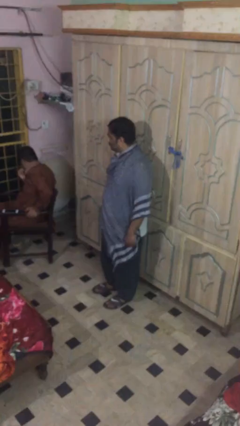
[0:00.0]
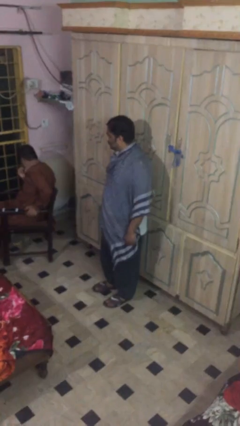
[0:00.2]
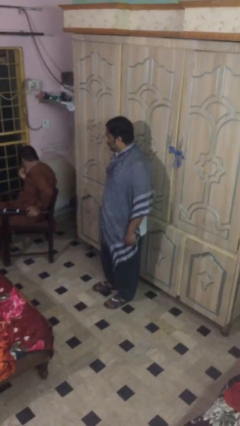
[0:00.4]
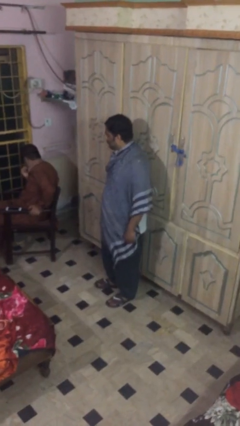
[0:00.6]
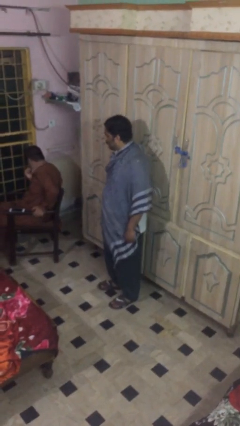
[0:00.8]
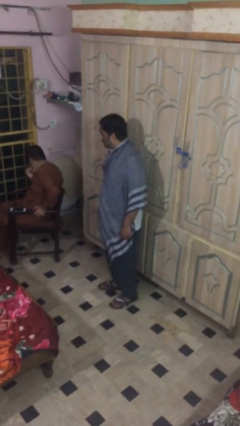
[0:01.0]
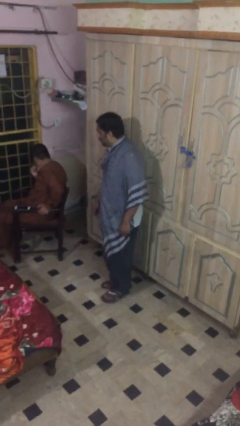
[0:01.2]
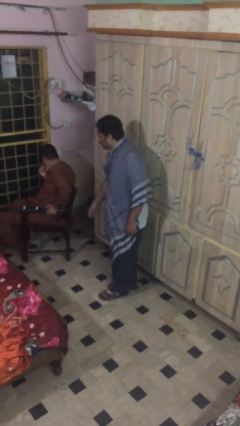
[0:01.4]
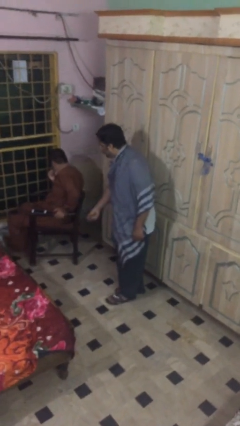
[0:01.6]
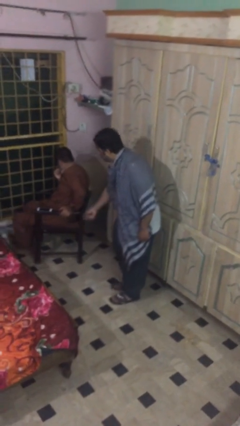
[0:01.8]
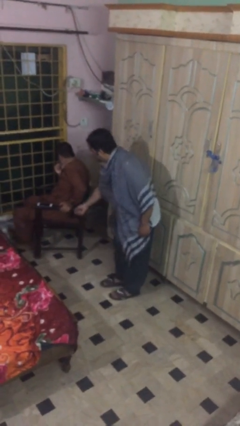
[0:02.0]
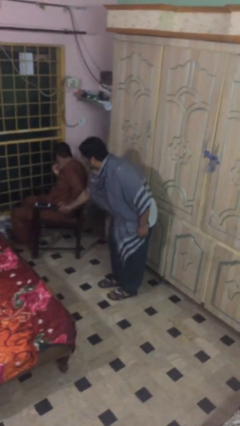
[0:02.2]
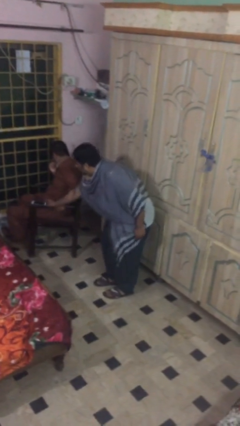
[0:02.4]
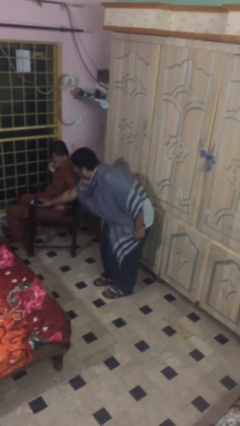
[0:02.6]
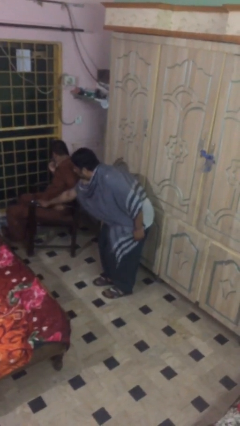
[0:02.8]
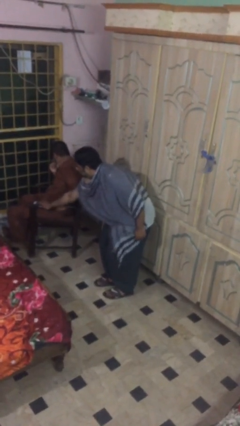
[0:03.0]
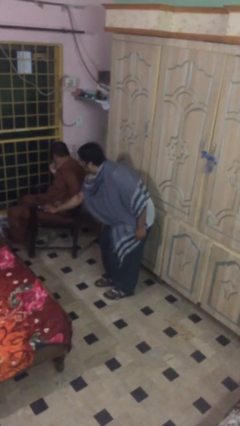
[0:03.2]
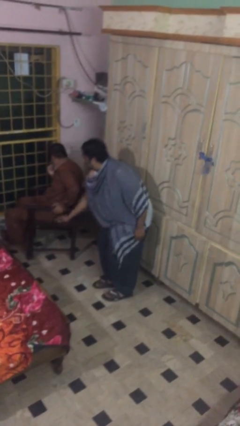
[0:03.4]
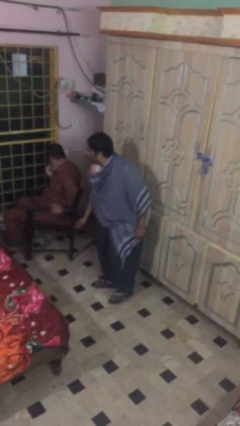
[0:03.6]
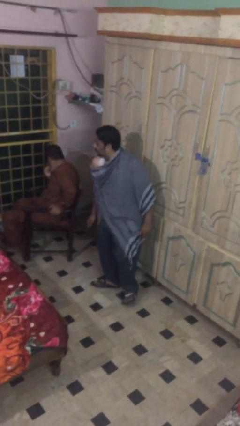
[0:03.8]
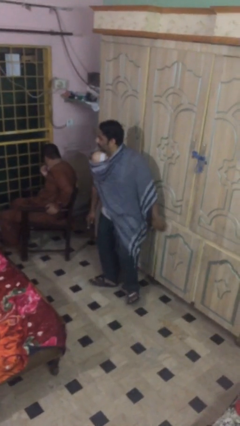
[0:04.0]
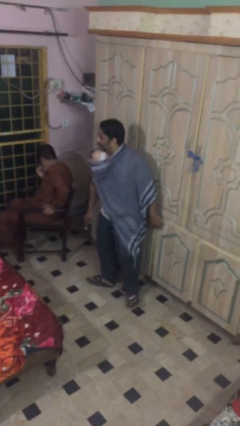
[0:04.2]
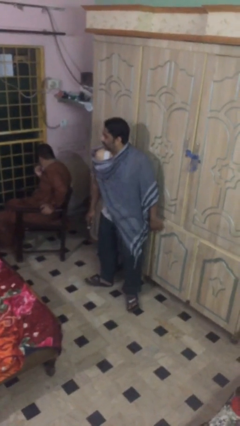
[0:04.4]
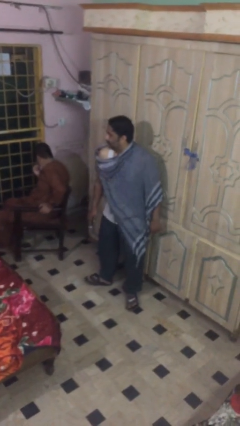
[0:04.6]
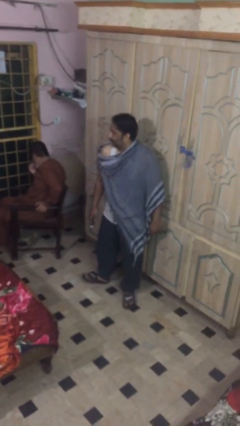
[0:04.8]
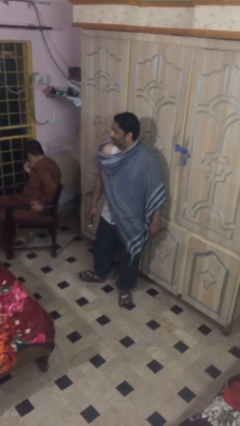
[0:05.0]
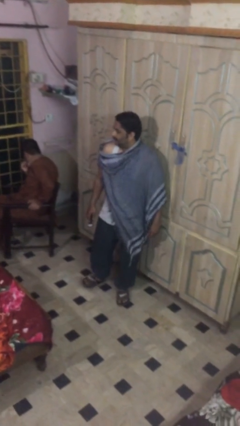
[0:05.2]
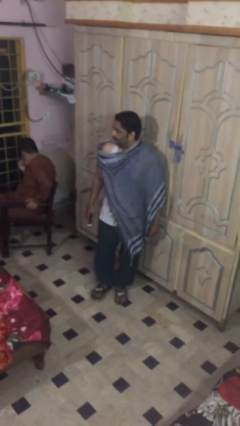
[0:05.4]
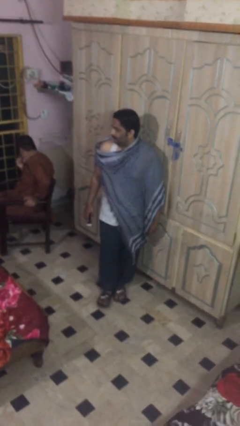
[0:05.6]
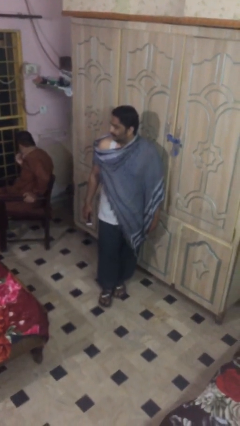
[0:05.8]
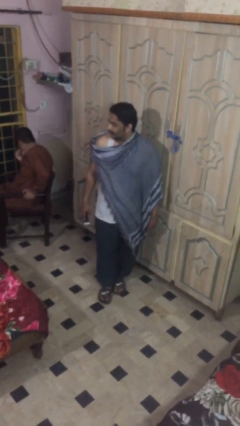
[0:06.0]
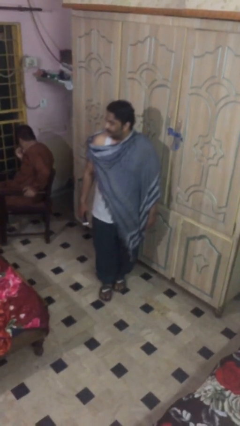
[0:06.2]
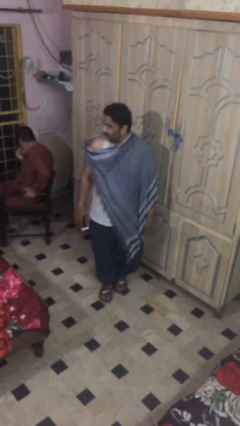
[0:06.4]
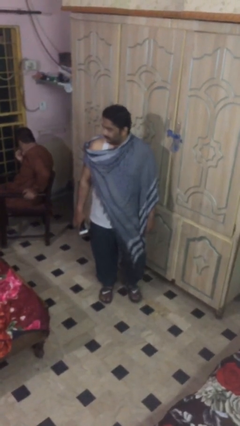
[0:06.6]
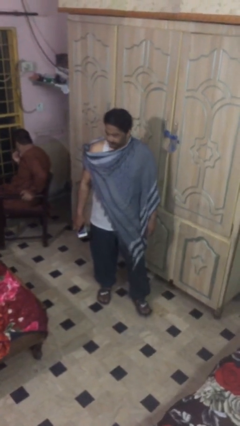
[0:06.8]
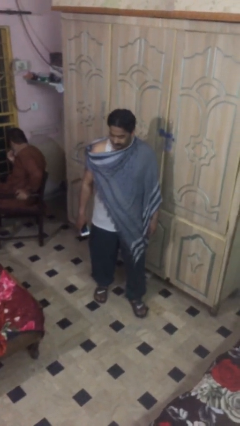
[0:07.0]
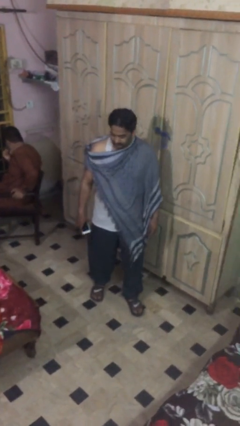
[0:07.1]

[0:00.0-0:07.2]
person steals object from person

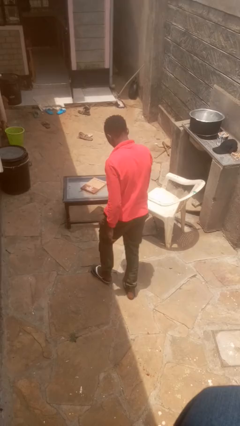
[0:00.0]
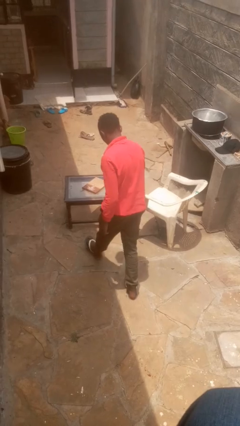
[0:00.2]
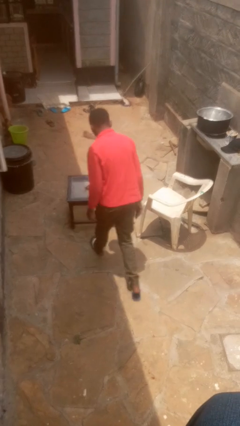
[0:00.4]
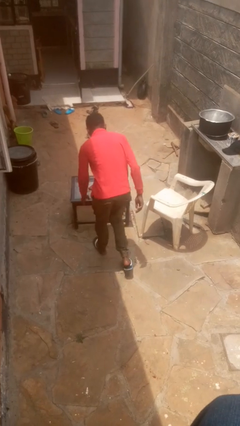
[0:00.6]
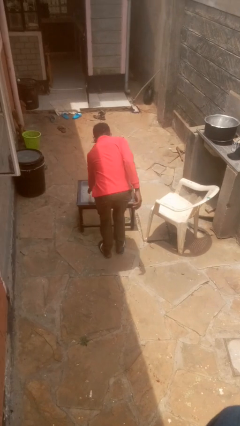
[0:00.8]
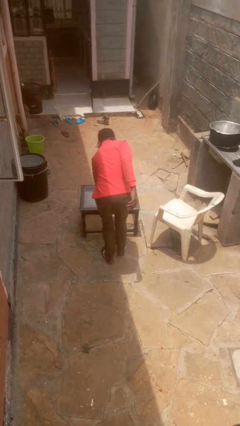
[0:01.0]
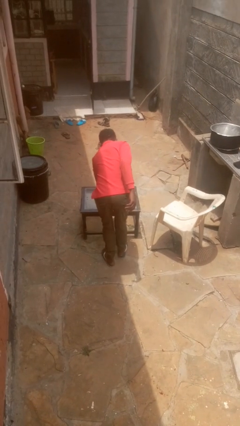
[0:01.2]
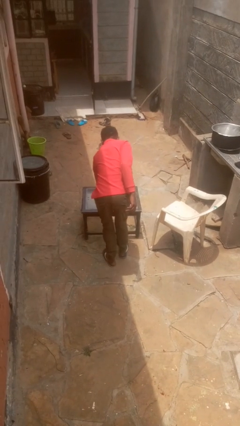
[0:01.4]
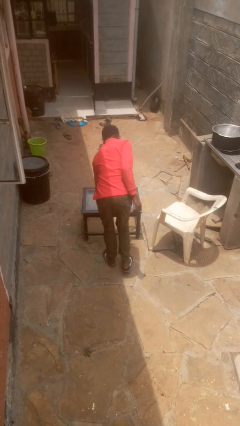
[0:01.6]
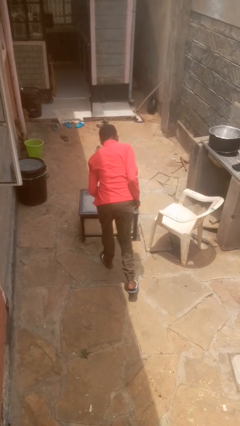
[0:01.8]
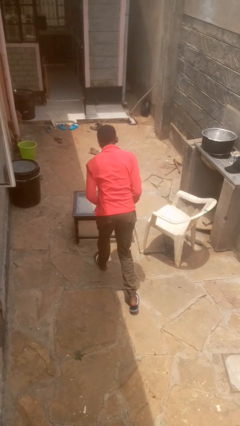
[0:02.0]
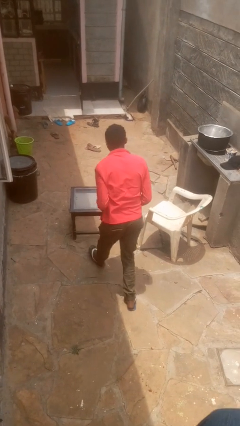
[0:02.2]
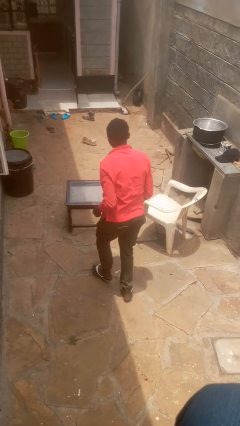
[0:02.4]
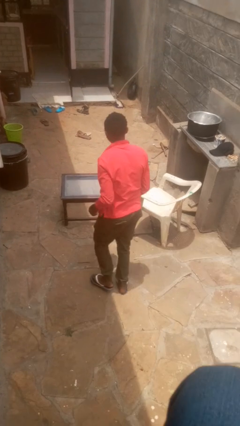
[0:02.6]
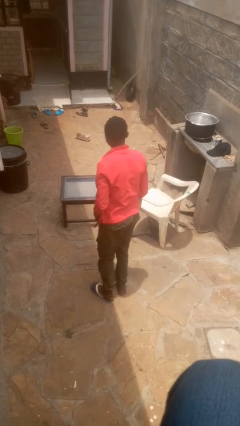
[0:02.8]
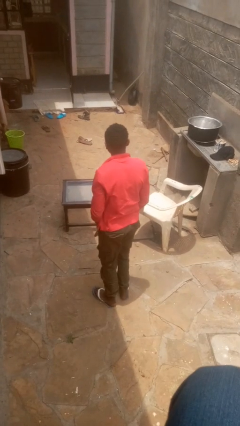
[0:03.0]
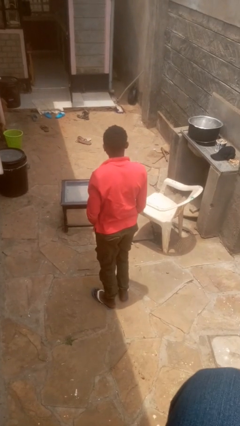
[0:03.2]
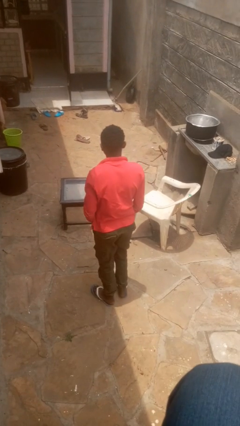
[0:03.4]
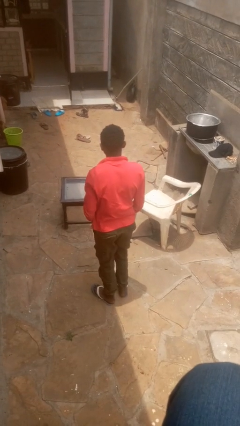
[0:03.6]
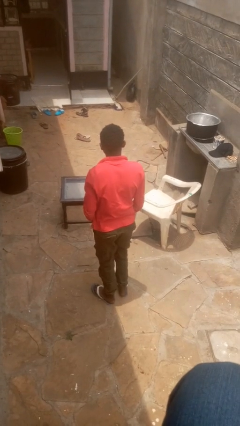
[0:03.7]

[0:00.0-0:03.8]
person picks up object from table

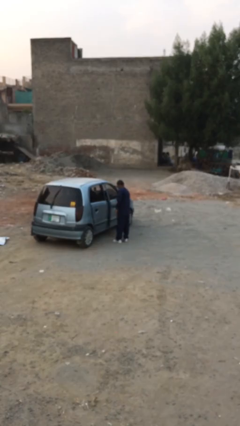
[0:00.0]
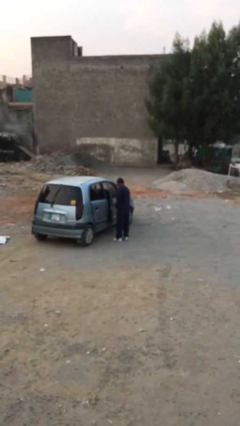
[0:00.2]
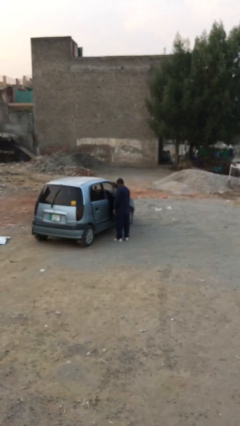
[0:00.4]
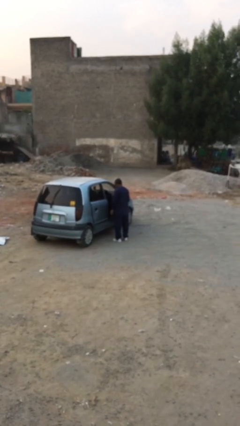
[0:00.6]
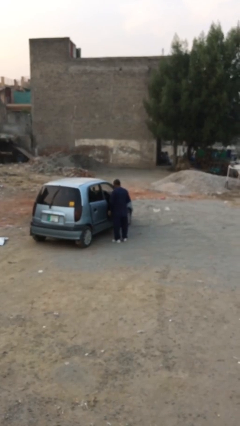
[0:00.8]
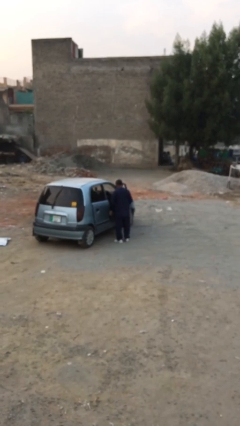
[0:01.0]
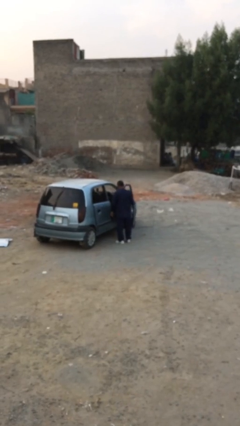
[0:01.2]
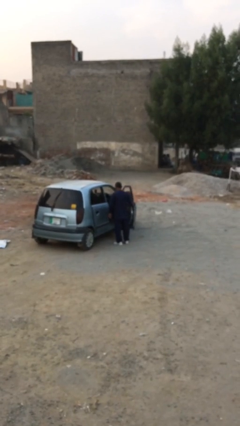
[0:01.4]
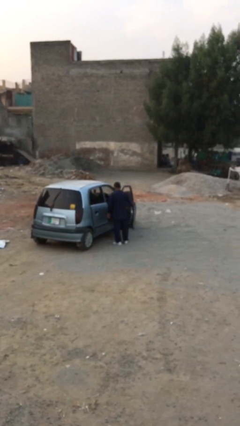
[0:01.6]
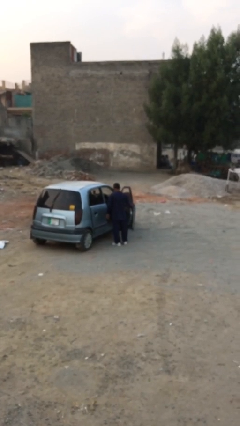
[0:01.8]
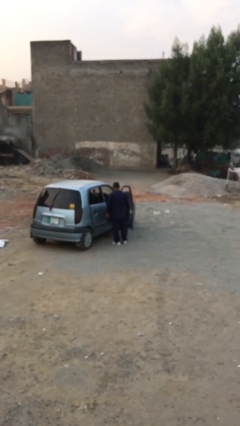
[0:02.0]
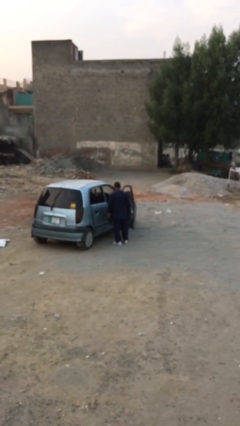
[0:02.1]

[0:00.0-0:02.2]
person opens car door

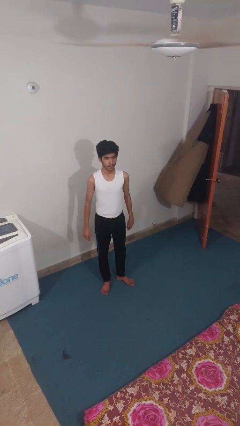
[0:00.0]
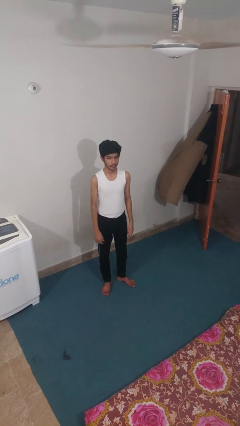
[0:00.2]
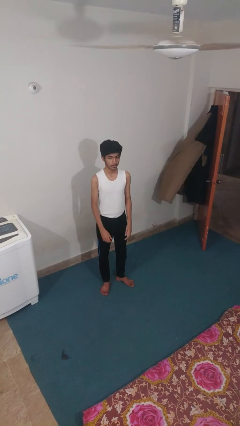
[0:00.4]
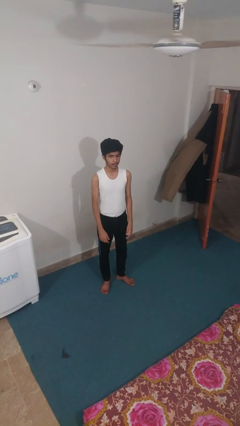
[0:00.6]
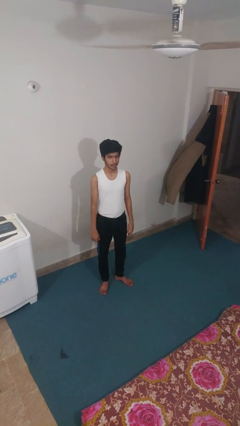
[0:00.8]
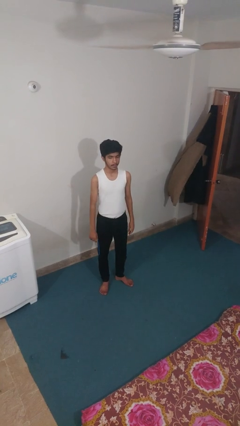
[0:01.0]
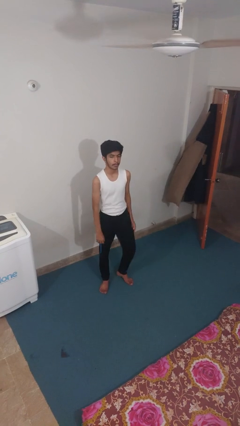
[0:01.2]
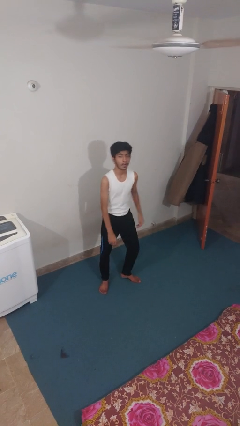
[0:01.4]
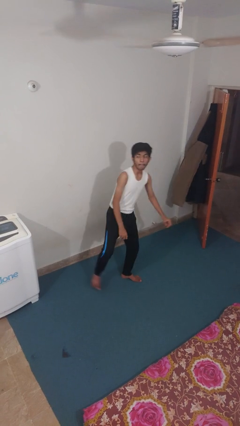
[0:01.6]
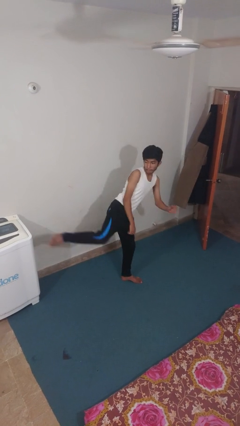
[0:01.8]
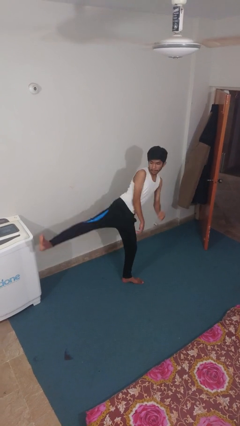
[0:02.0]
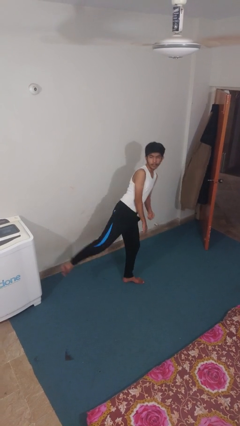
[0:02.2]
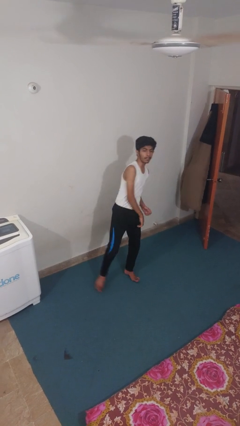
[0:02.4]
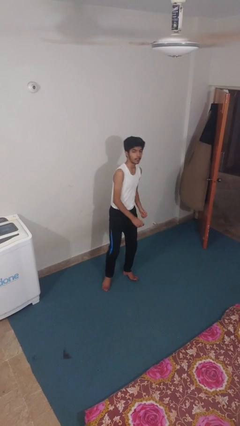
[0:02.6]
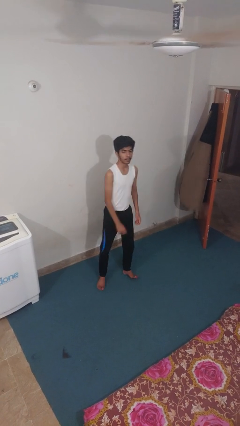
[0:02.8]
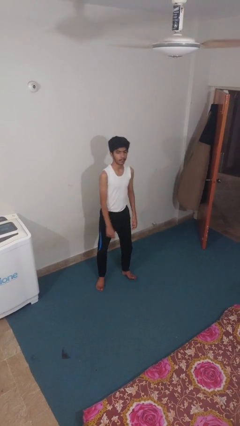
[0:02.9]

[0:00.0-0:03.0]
person karate kicks

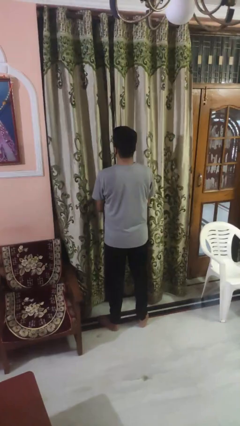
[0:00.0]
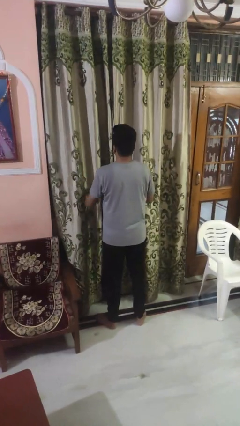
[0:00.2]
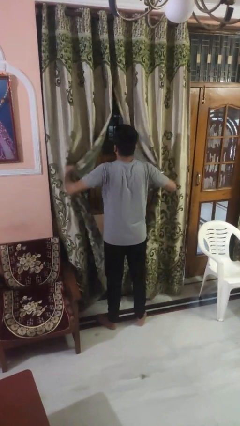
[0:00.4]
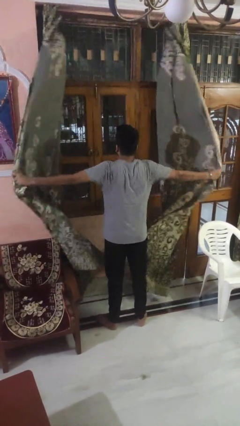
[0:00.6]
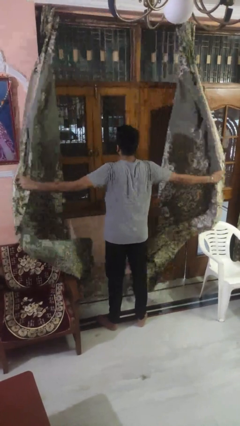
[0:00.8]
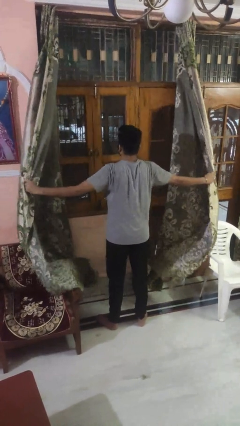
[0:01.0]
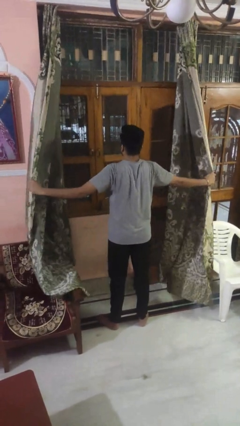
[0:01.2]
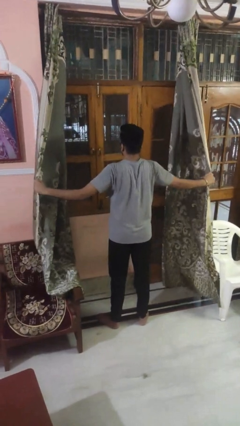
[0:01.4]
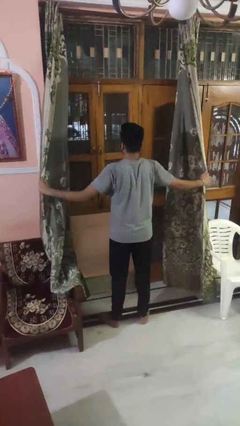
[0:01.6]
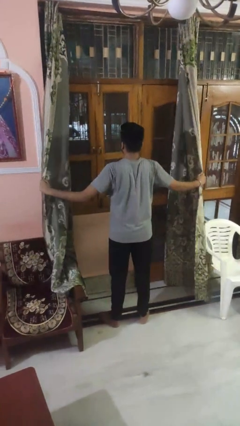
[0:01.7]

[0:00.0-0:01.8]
person opens curtains
